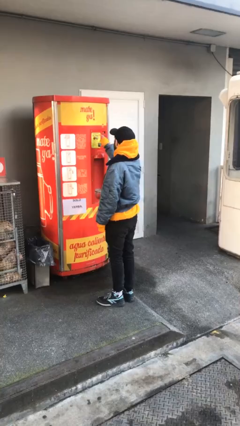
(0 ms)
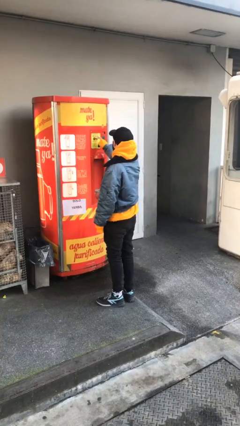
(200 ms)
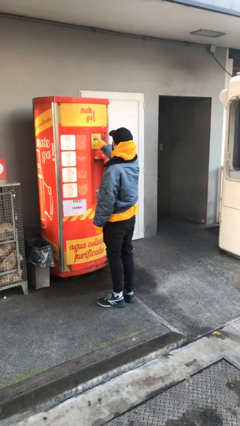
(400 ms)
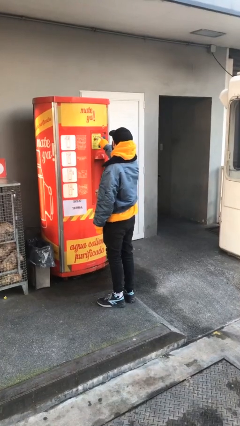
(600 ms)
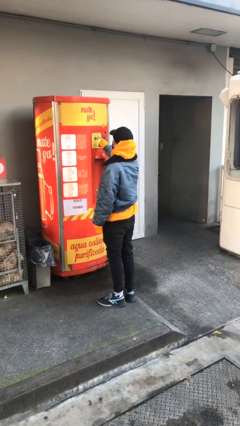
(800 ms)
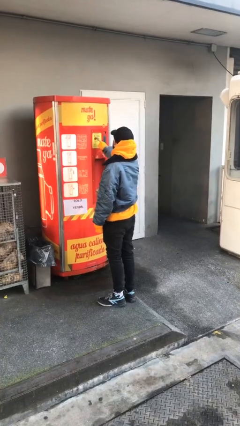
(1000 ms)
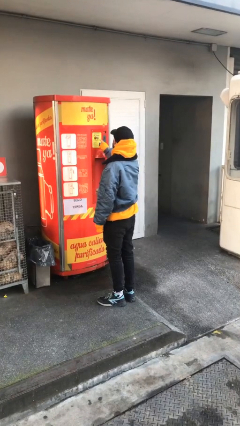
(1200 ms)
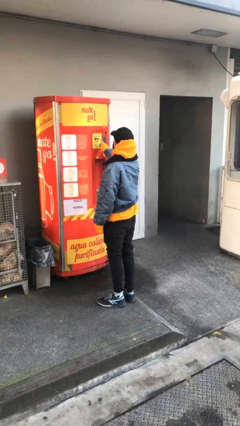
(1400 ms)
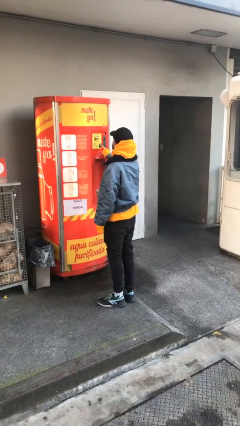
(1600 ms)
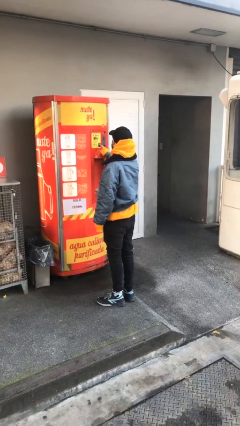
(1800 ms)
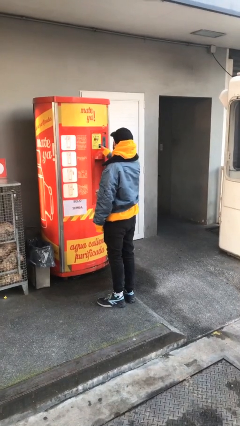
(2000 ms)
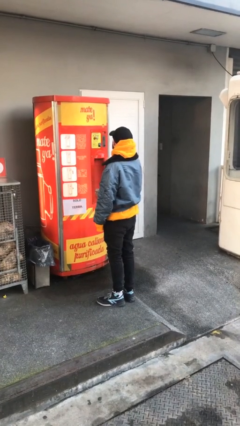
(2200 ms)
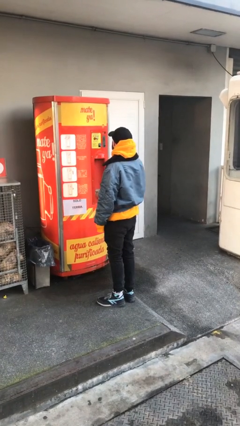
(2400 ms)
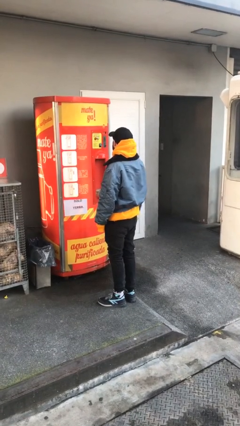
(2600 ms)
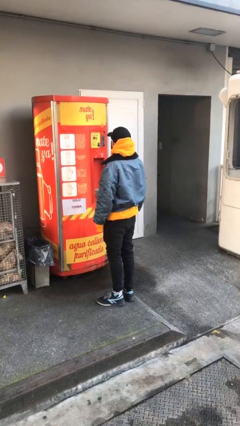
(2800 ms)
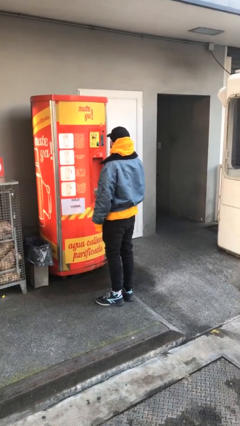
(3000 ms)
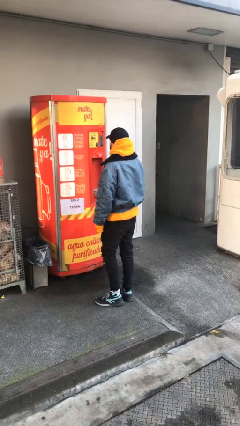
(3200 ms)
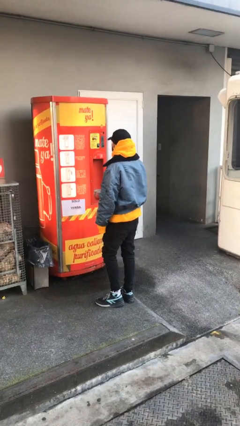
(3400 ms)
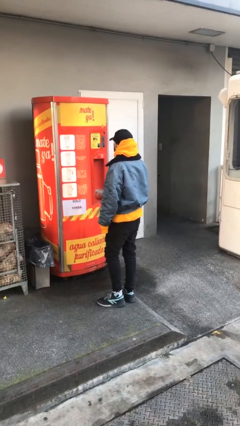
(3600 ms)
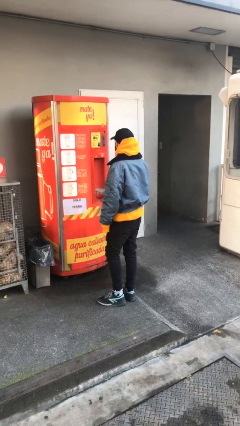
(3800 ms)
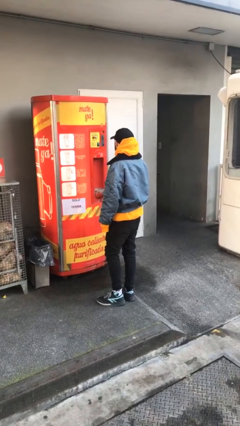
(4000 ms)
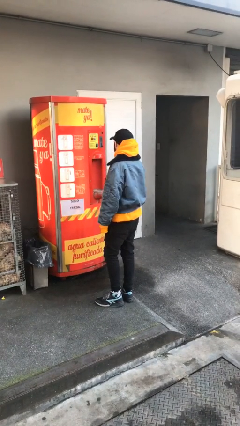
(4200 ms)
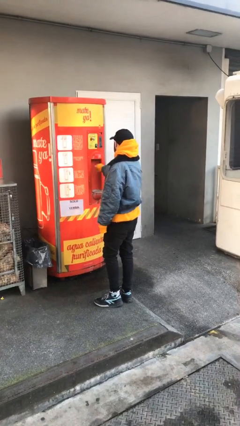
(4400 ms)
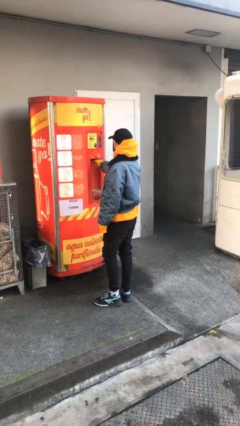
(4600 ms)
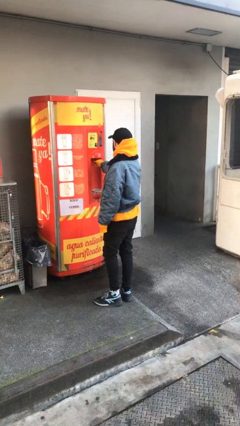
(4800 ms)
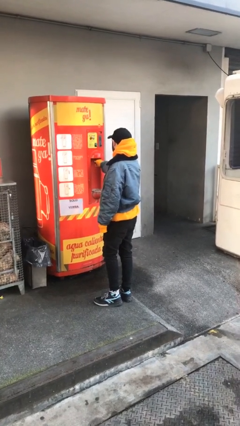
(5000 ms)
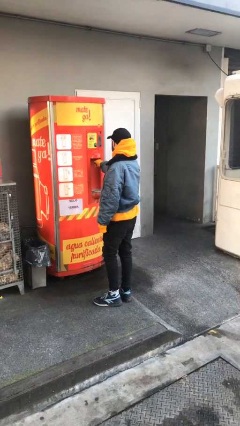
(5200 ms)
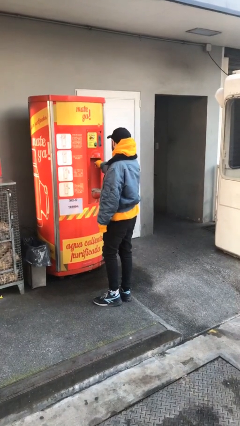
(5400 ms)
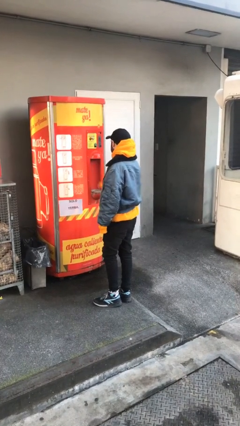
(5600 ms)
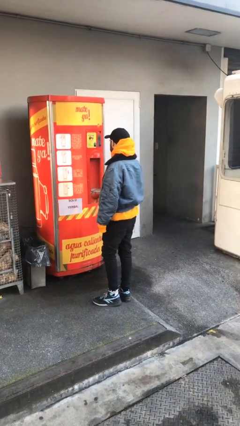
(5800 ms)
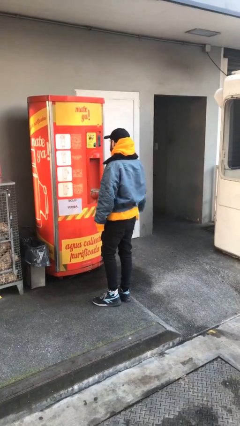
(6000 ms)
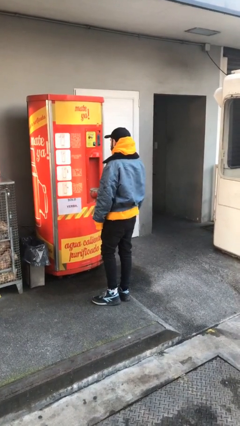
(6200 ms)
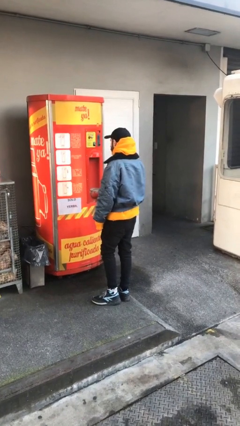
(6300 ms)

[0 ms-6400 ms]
person purchases from machine

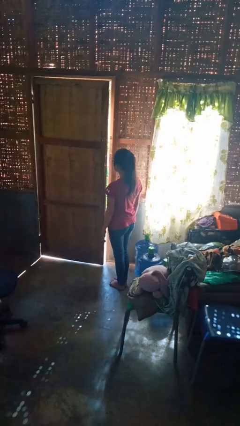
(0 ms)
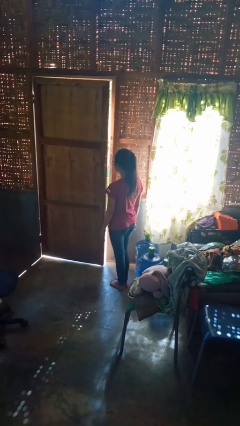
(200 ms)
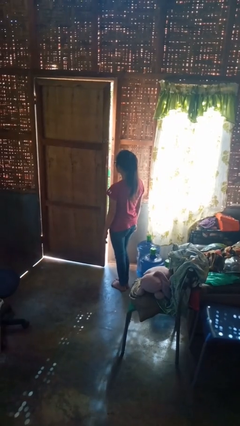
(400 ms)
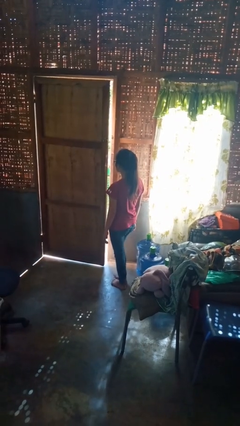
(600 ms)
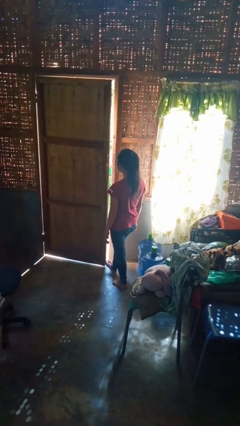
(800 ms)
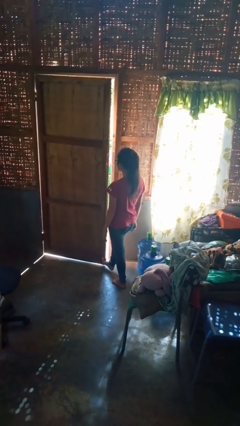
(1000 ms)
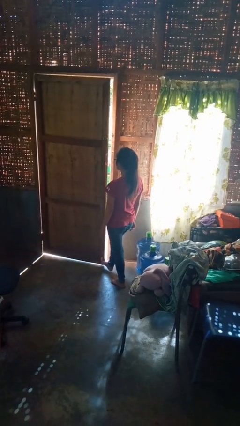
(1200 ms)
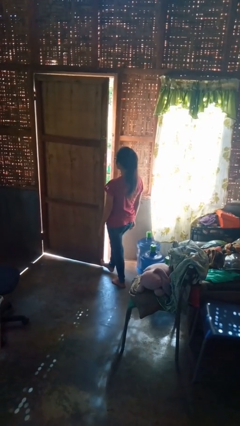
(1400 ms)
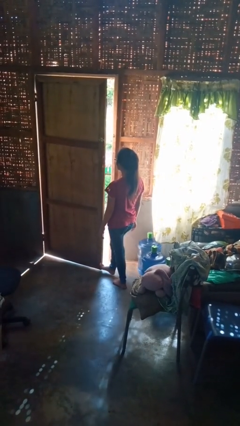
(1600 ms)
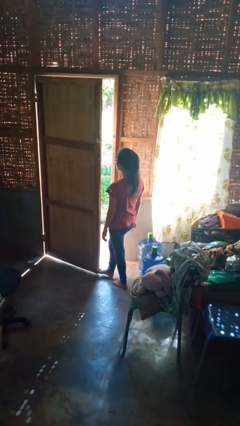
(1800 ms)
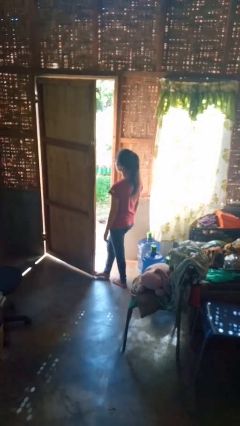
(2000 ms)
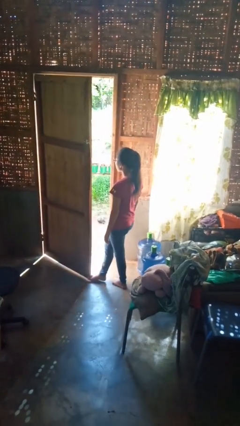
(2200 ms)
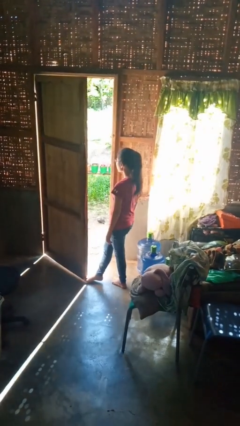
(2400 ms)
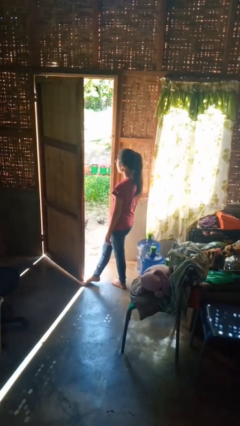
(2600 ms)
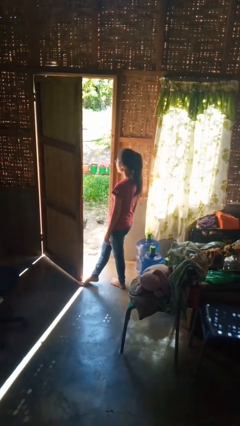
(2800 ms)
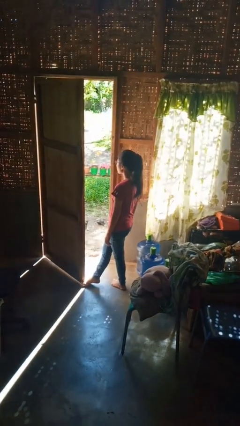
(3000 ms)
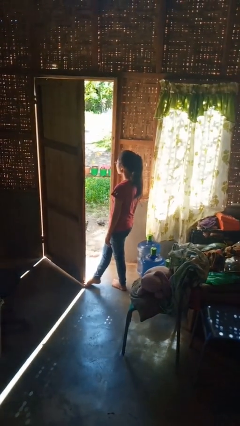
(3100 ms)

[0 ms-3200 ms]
person opens facility door

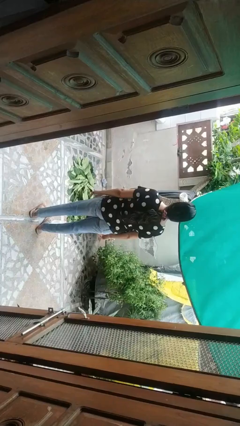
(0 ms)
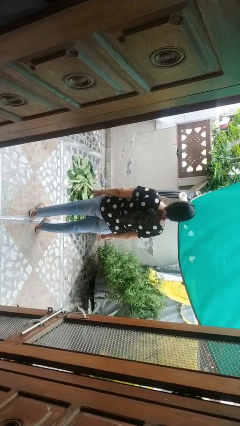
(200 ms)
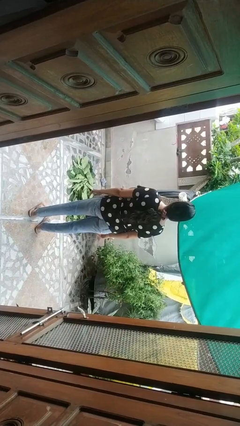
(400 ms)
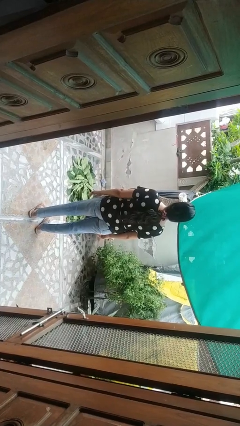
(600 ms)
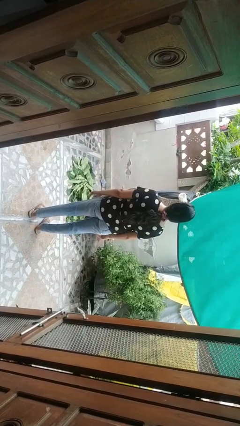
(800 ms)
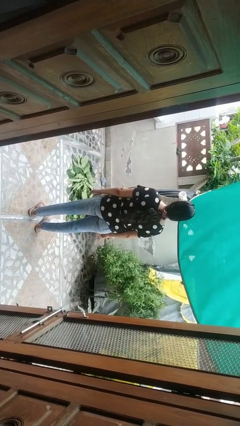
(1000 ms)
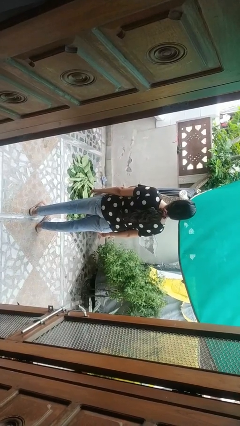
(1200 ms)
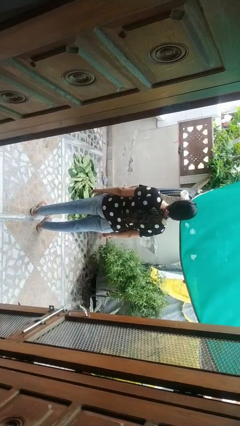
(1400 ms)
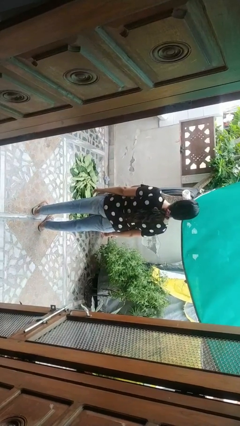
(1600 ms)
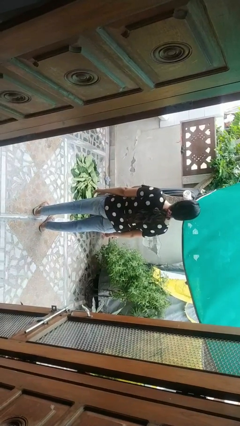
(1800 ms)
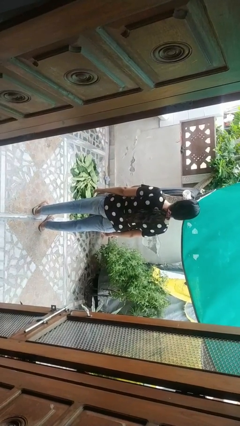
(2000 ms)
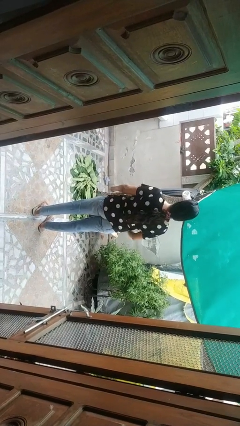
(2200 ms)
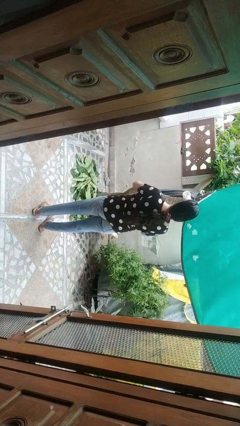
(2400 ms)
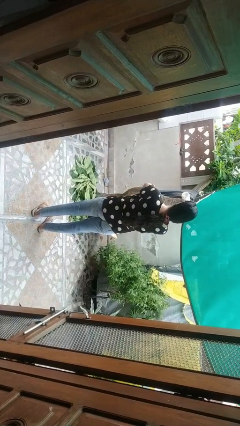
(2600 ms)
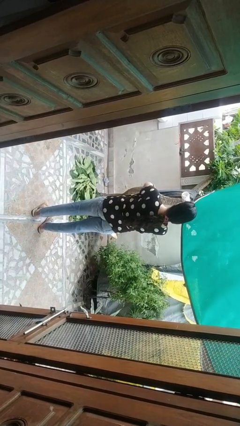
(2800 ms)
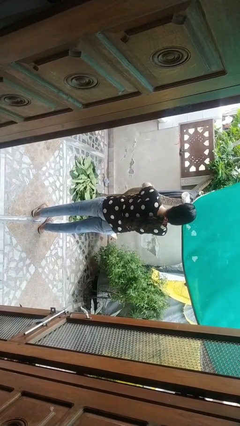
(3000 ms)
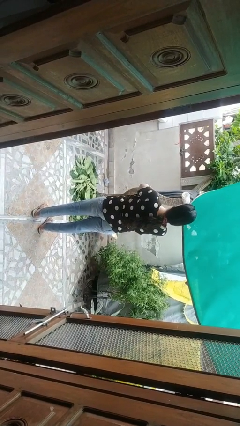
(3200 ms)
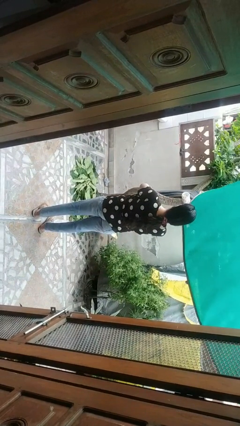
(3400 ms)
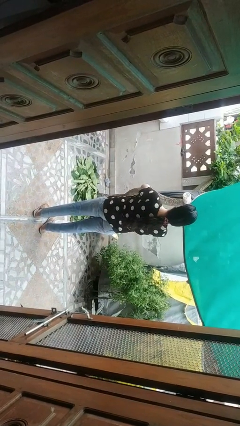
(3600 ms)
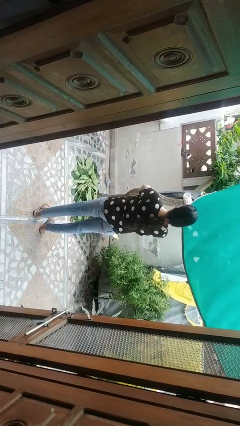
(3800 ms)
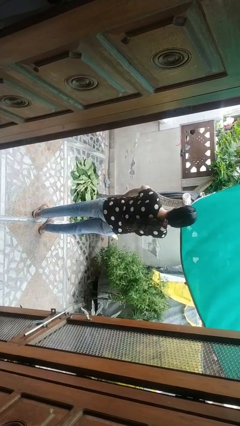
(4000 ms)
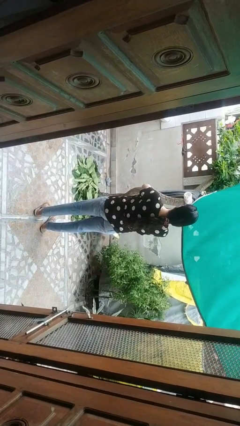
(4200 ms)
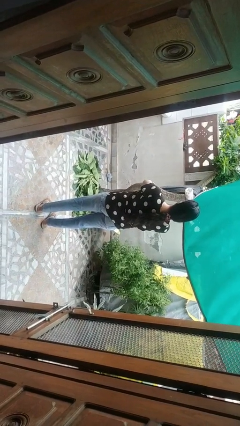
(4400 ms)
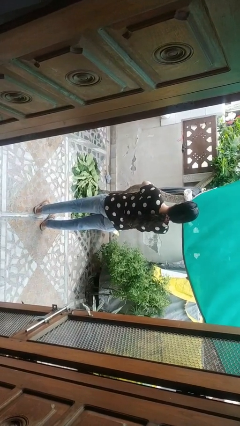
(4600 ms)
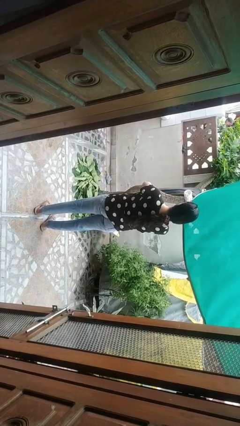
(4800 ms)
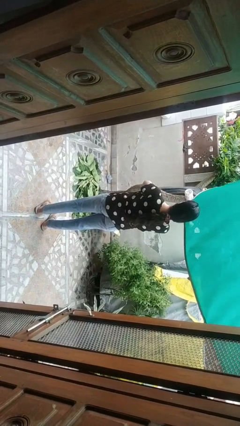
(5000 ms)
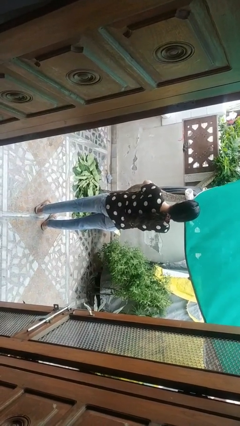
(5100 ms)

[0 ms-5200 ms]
person crosses arms

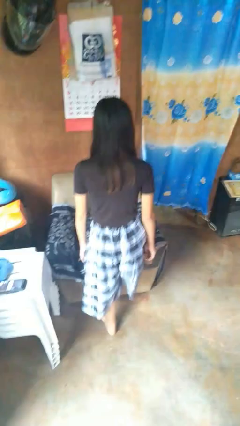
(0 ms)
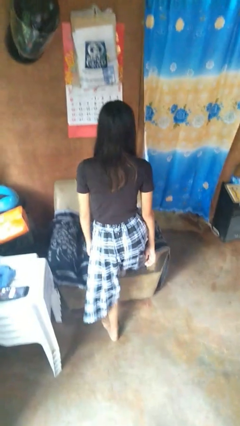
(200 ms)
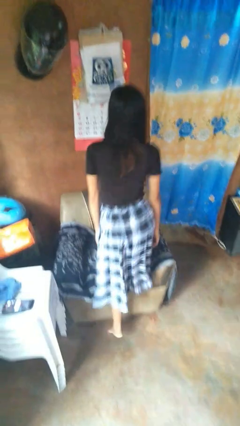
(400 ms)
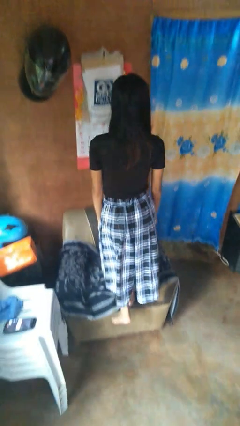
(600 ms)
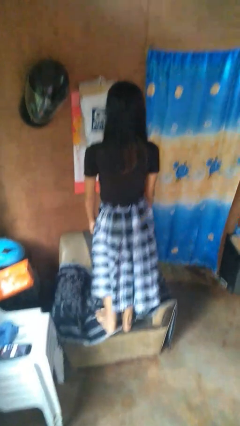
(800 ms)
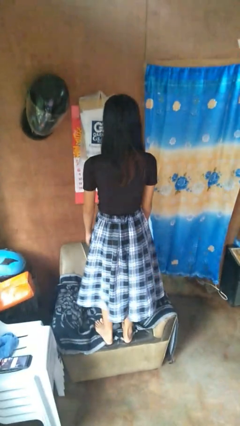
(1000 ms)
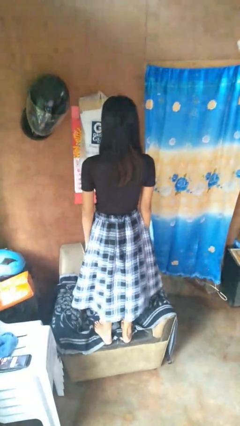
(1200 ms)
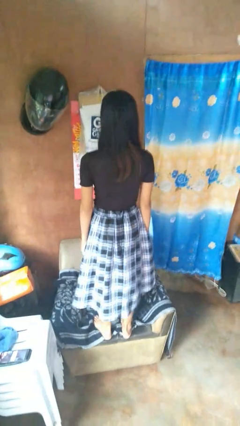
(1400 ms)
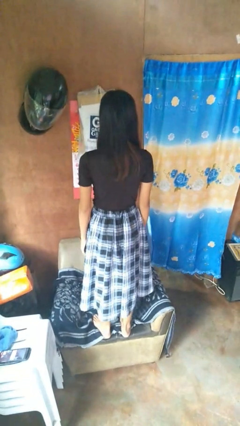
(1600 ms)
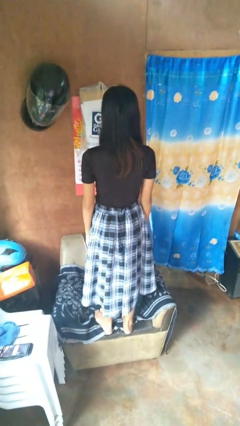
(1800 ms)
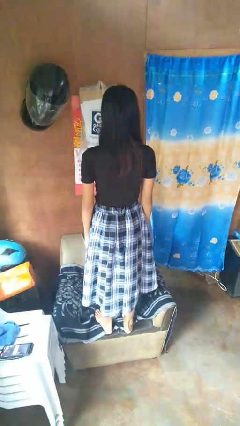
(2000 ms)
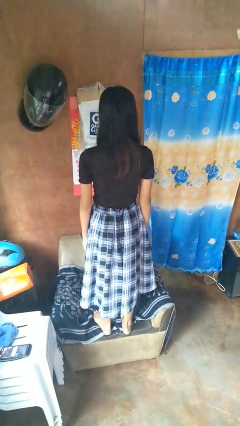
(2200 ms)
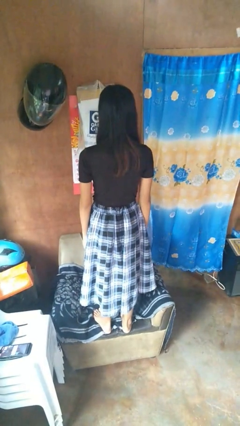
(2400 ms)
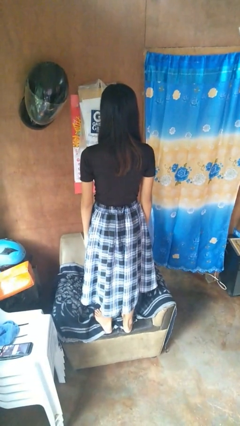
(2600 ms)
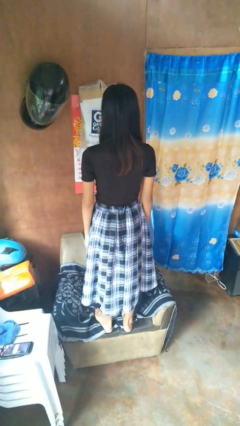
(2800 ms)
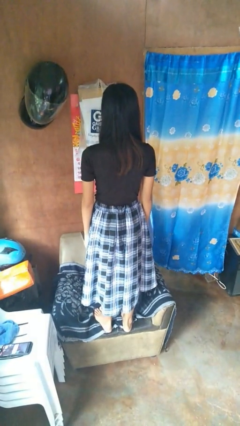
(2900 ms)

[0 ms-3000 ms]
person climbs on couch

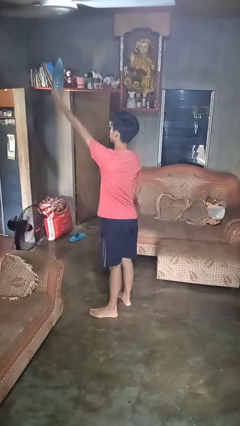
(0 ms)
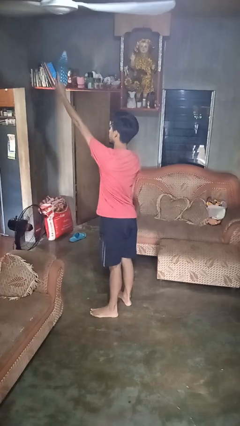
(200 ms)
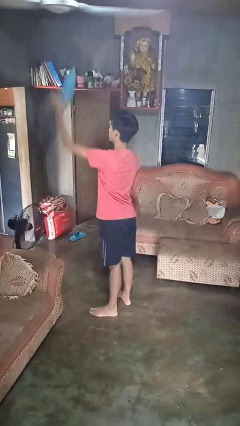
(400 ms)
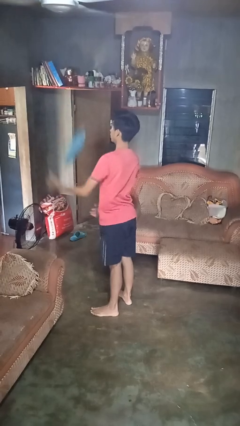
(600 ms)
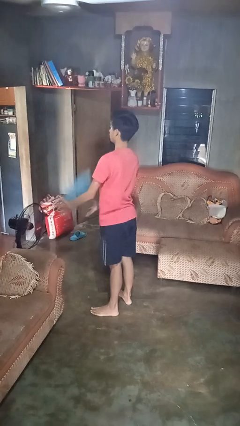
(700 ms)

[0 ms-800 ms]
person drops object
